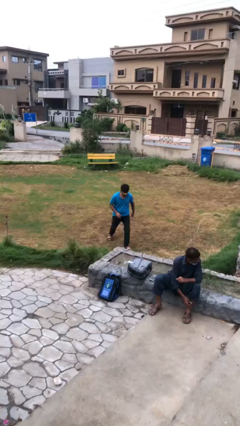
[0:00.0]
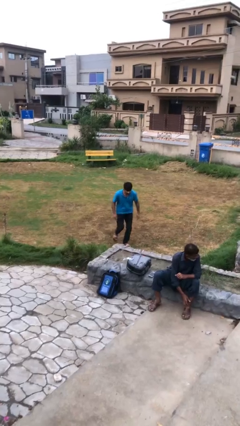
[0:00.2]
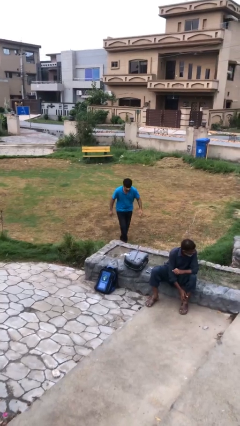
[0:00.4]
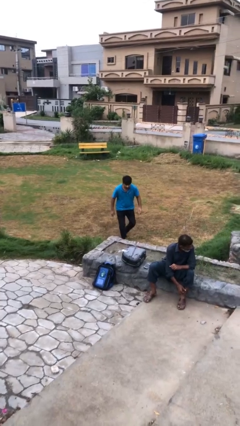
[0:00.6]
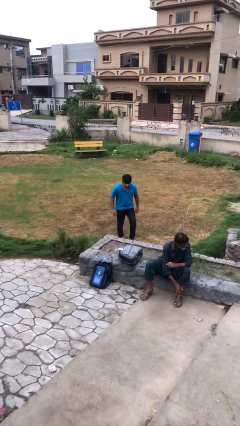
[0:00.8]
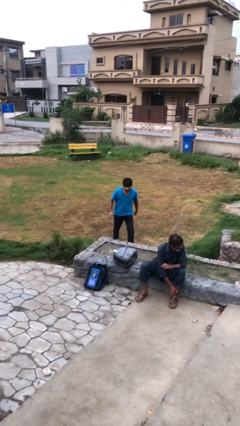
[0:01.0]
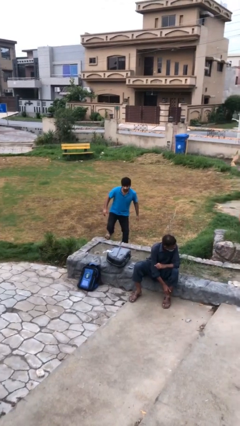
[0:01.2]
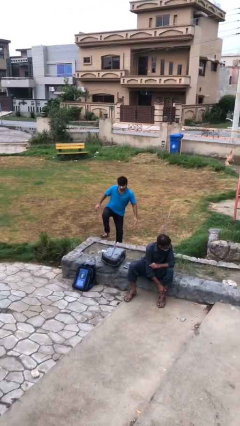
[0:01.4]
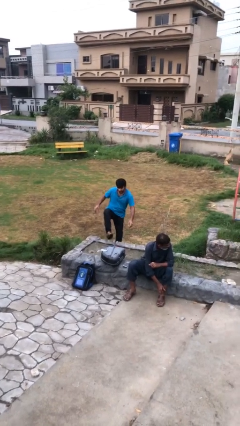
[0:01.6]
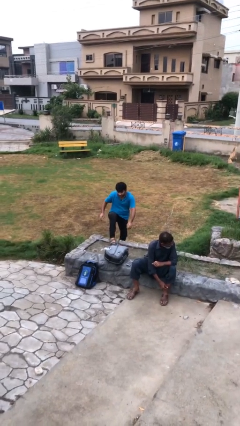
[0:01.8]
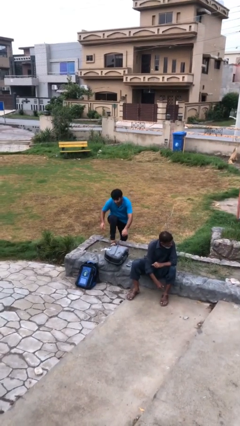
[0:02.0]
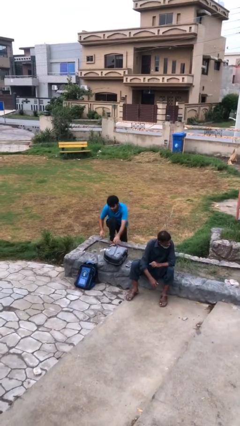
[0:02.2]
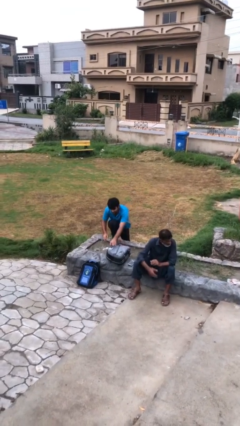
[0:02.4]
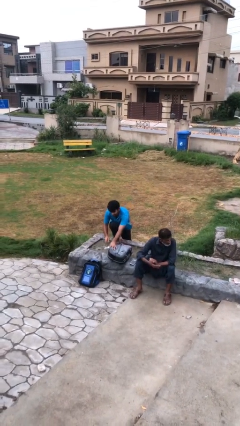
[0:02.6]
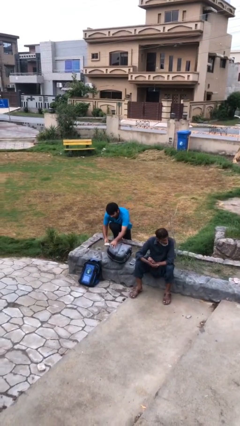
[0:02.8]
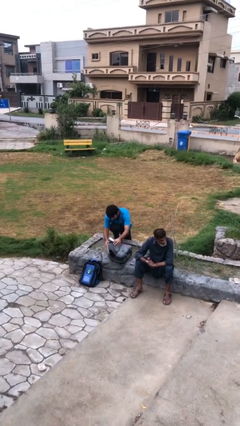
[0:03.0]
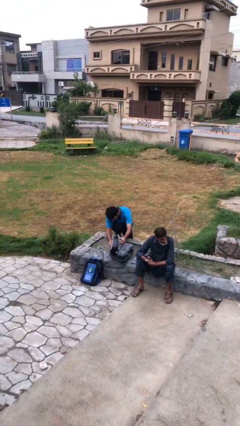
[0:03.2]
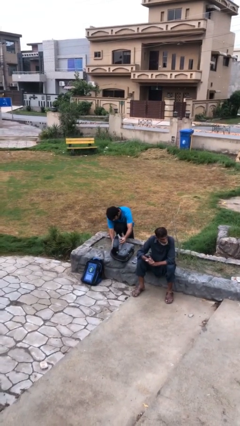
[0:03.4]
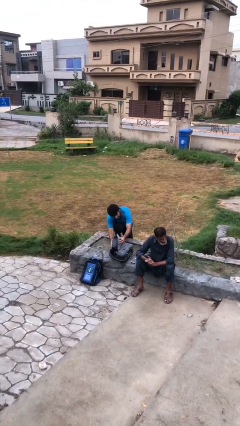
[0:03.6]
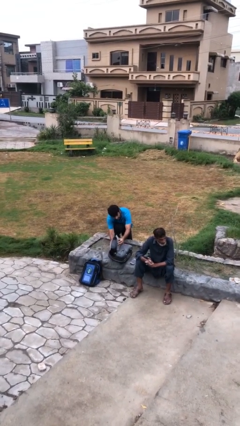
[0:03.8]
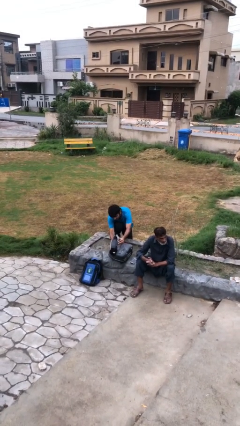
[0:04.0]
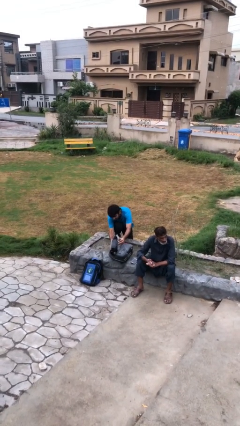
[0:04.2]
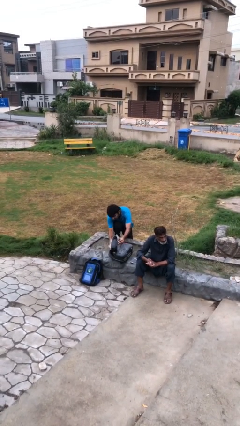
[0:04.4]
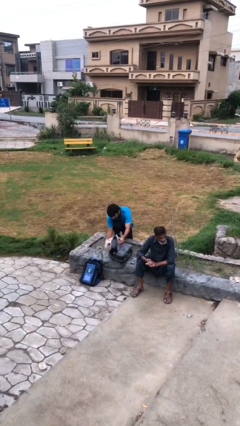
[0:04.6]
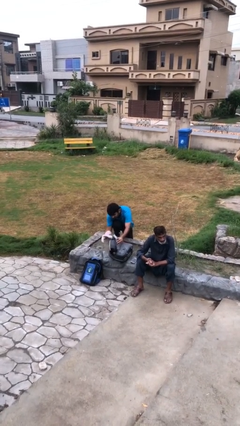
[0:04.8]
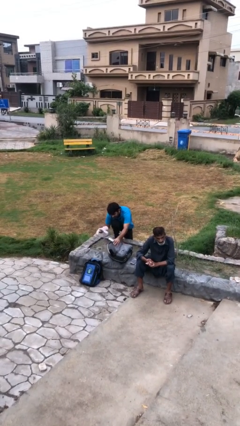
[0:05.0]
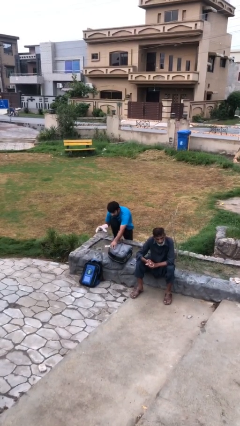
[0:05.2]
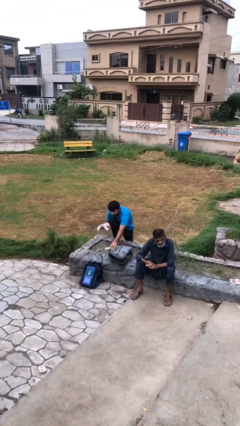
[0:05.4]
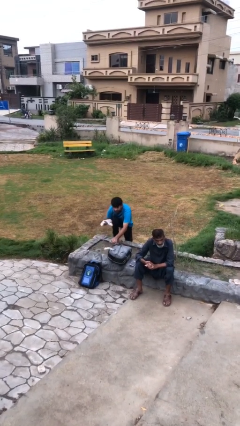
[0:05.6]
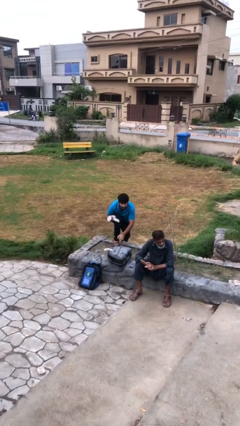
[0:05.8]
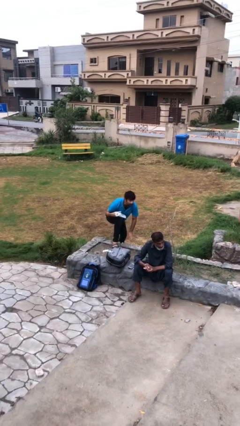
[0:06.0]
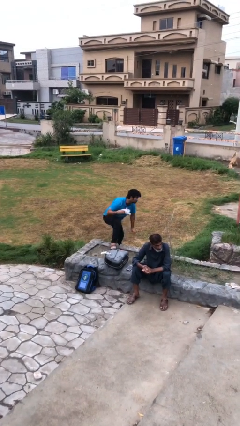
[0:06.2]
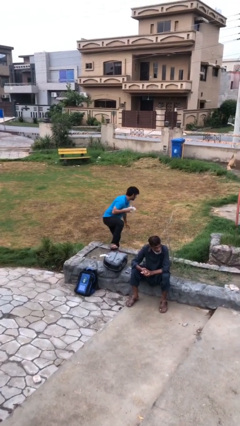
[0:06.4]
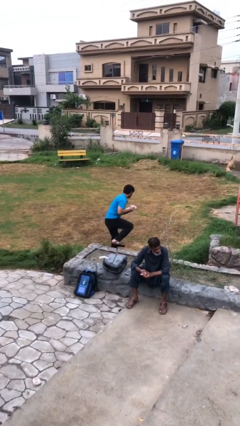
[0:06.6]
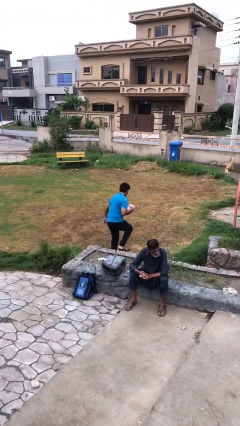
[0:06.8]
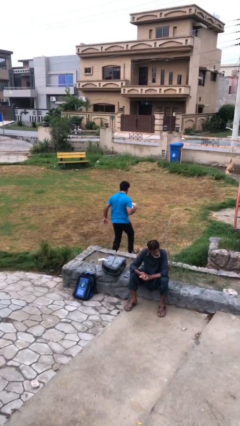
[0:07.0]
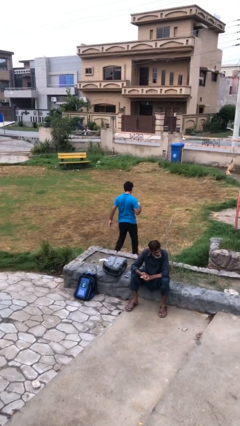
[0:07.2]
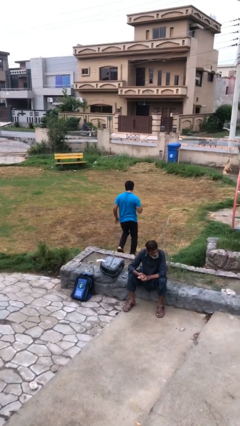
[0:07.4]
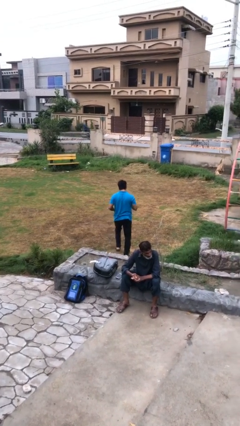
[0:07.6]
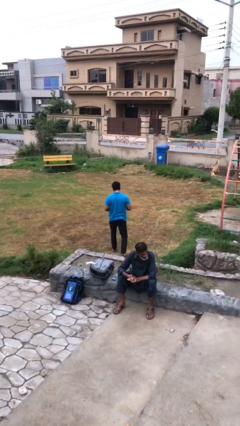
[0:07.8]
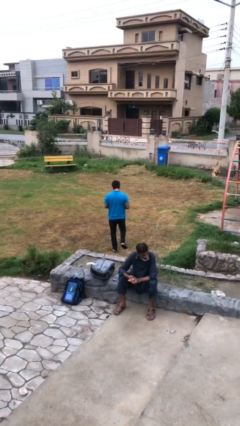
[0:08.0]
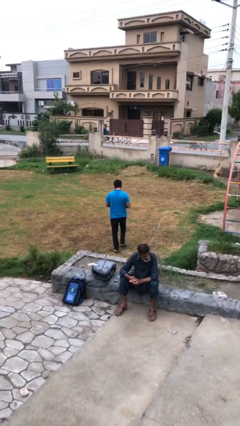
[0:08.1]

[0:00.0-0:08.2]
person steals object from person

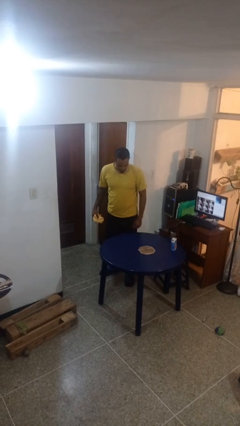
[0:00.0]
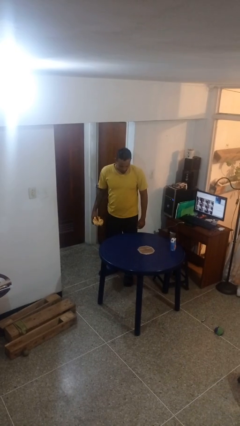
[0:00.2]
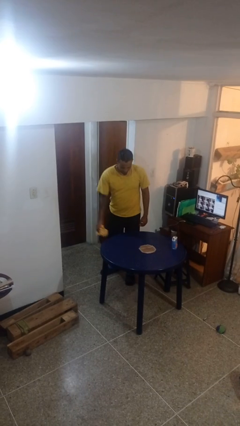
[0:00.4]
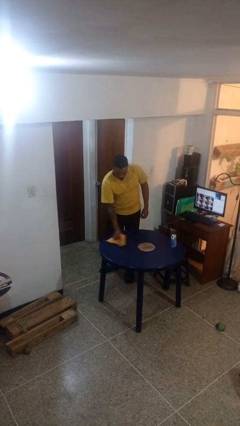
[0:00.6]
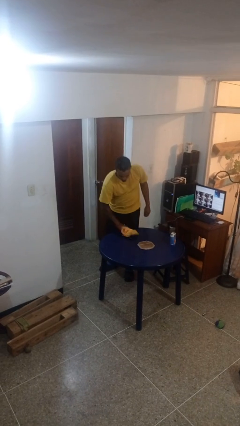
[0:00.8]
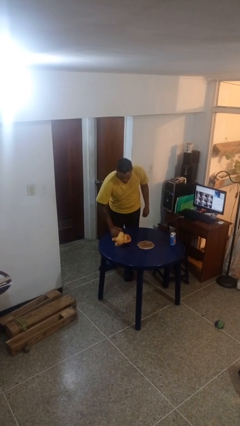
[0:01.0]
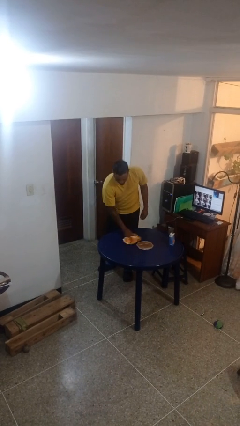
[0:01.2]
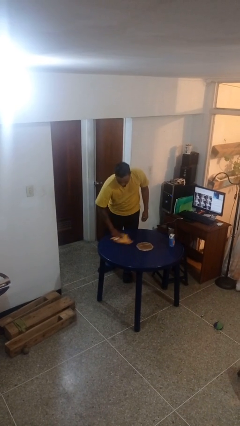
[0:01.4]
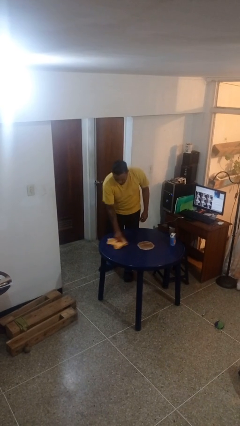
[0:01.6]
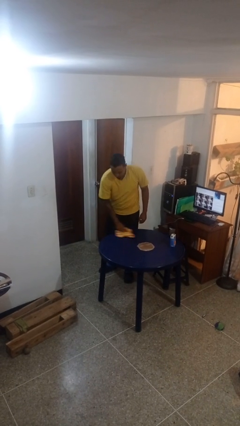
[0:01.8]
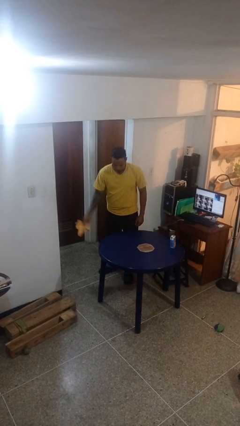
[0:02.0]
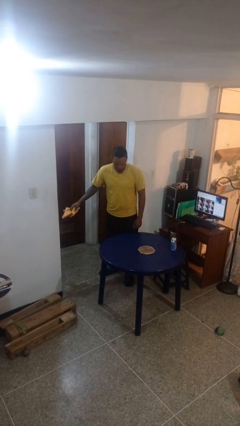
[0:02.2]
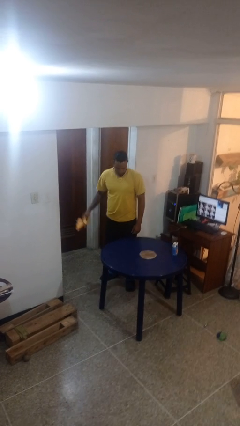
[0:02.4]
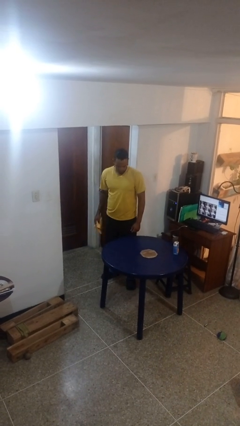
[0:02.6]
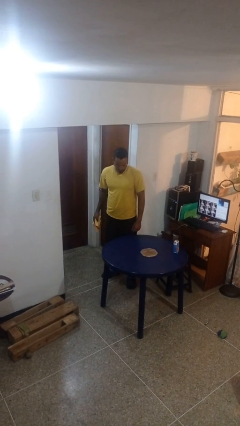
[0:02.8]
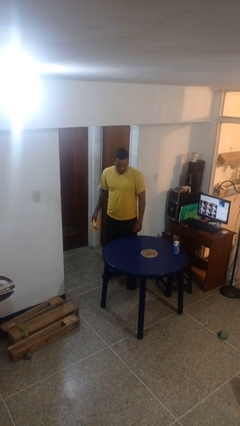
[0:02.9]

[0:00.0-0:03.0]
person cleans table with rag

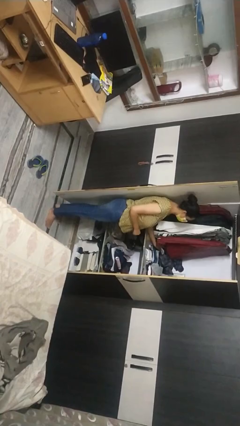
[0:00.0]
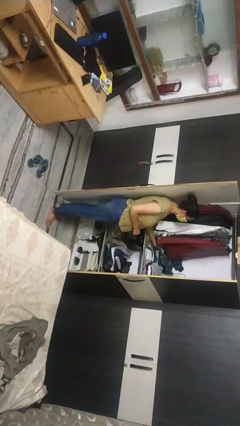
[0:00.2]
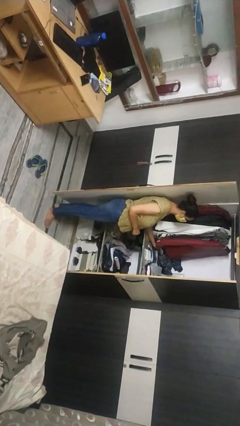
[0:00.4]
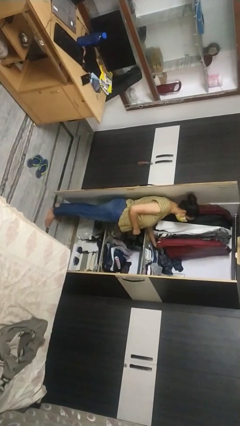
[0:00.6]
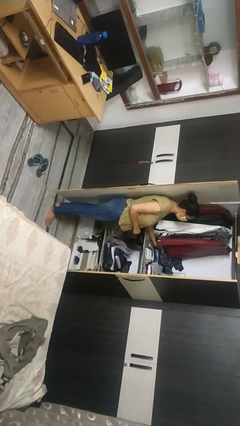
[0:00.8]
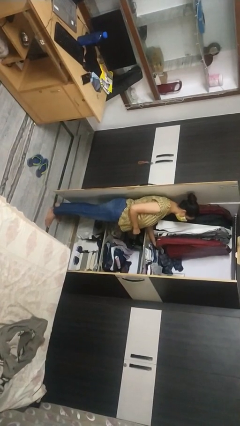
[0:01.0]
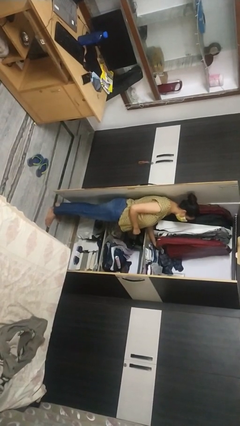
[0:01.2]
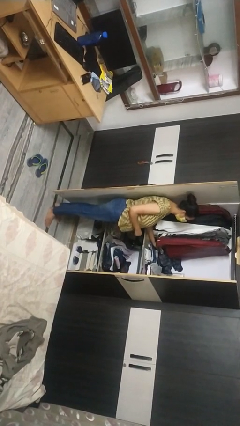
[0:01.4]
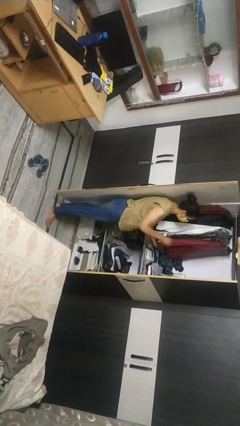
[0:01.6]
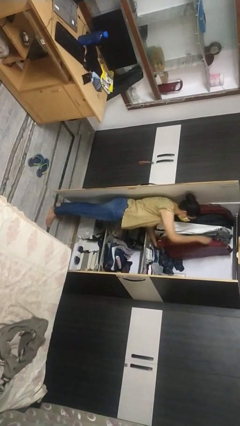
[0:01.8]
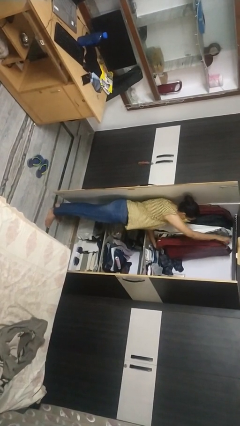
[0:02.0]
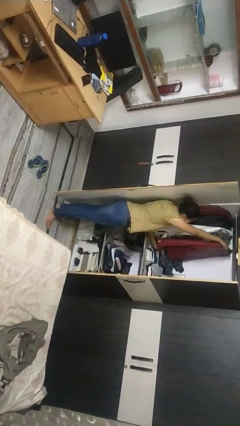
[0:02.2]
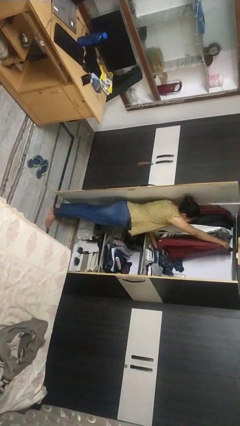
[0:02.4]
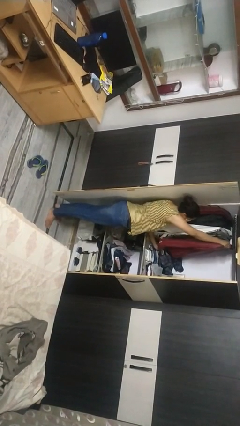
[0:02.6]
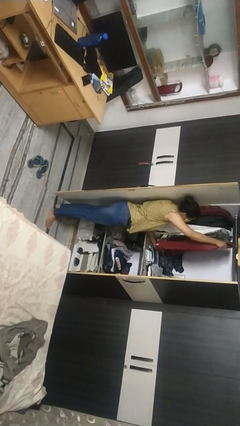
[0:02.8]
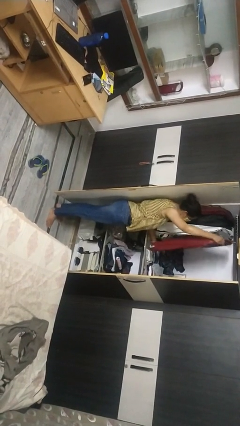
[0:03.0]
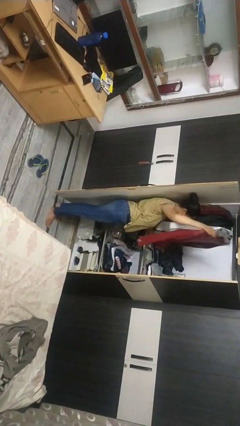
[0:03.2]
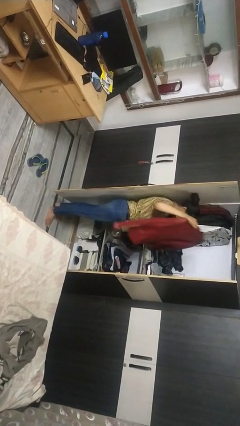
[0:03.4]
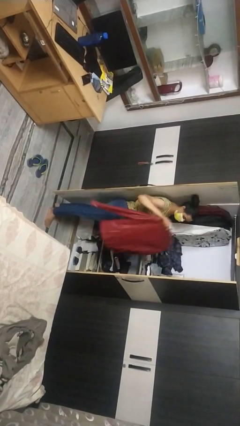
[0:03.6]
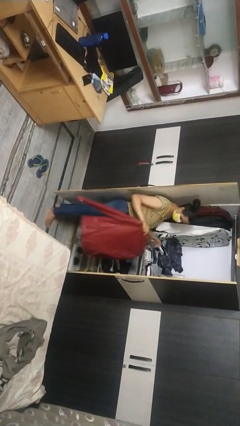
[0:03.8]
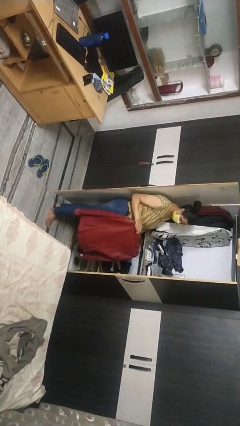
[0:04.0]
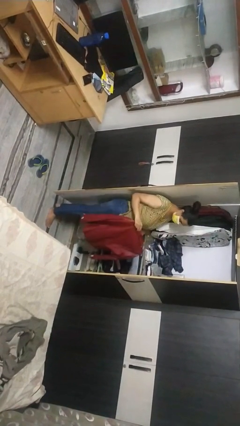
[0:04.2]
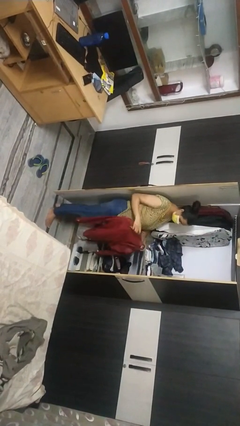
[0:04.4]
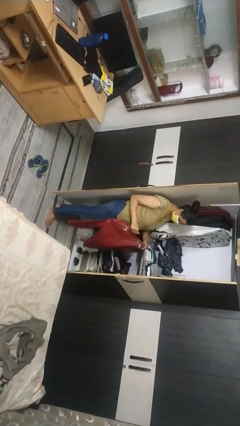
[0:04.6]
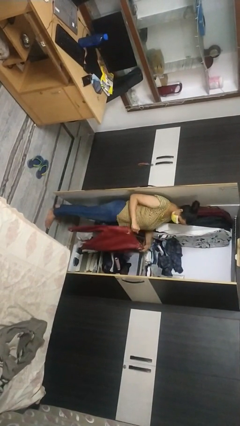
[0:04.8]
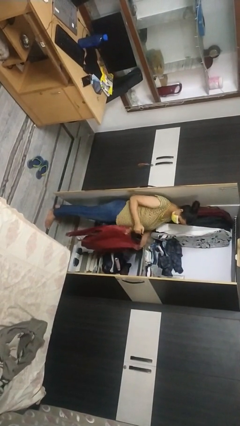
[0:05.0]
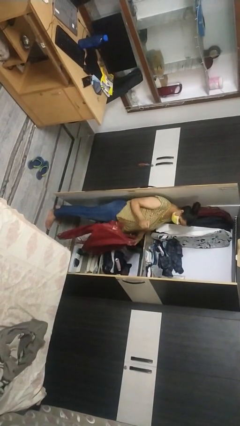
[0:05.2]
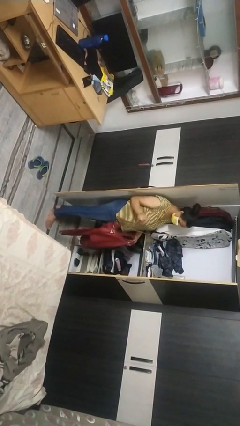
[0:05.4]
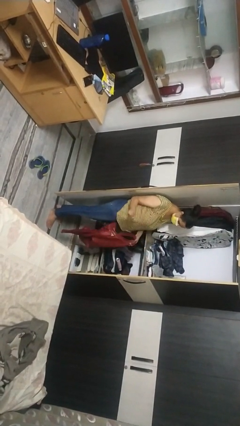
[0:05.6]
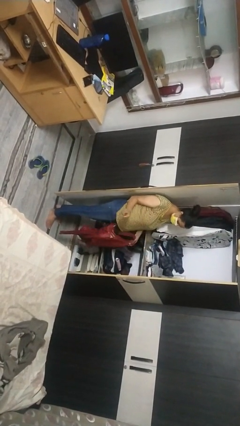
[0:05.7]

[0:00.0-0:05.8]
person takes clothes from closet

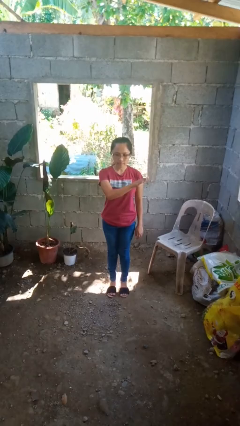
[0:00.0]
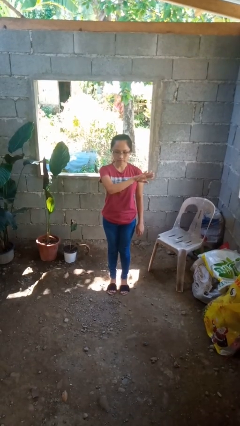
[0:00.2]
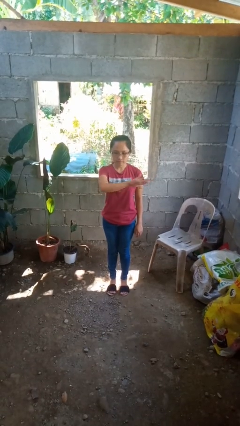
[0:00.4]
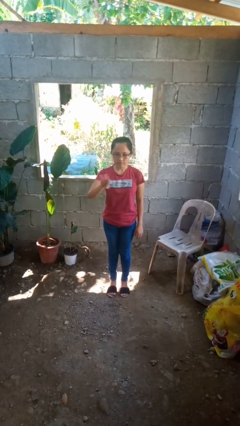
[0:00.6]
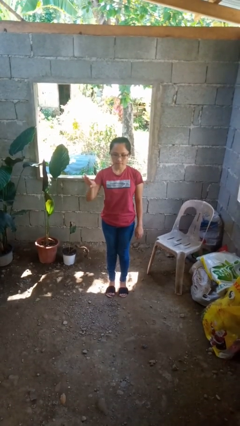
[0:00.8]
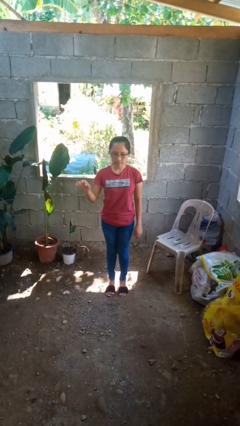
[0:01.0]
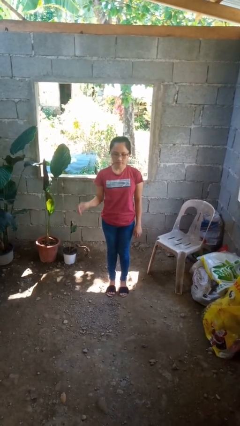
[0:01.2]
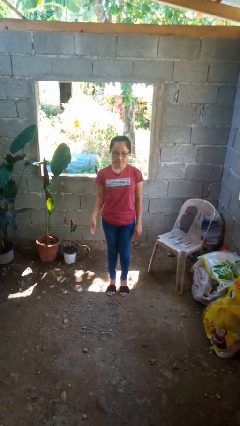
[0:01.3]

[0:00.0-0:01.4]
person gestures swipe right
